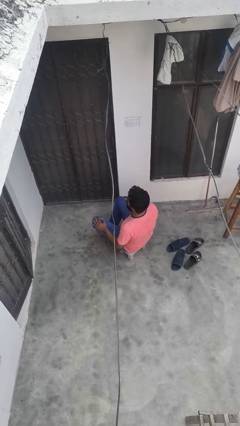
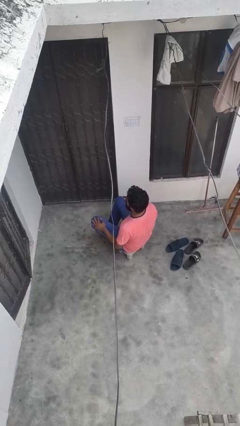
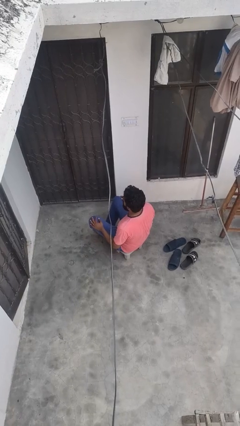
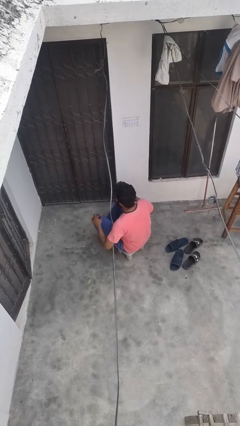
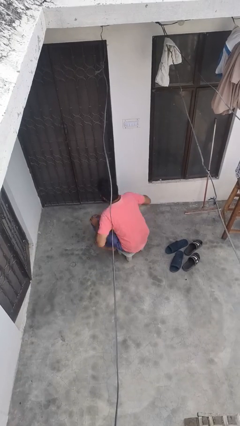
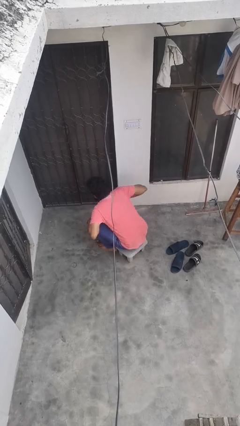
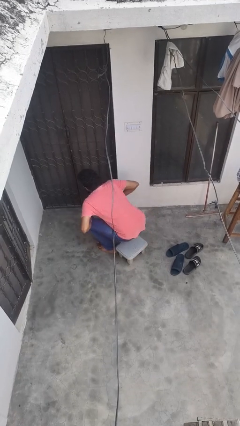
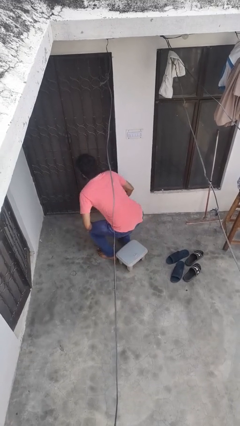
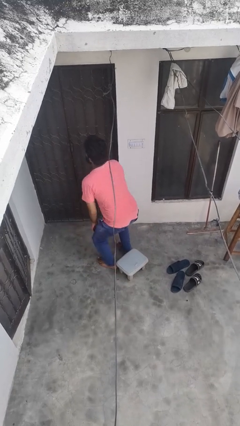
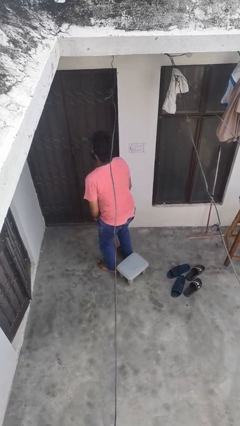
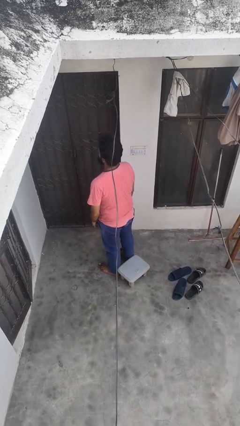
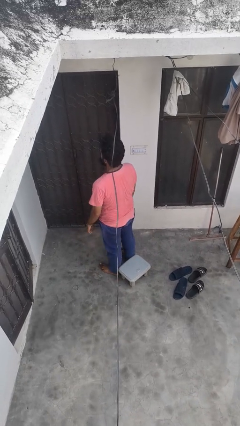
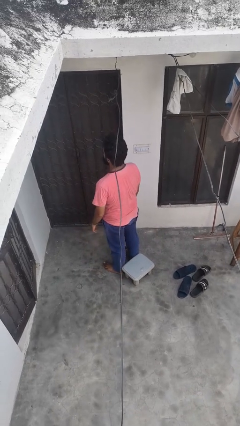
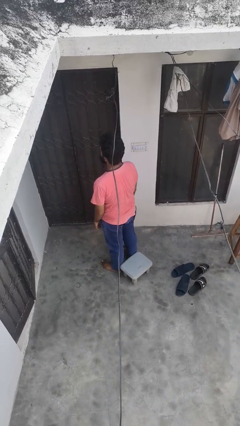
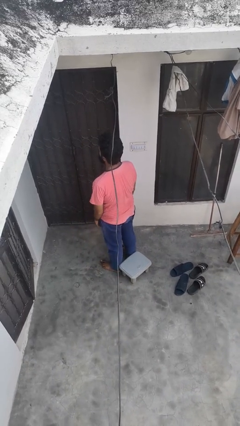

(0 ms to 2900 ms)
person stands up from floor

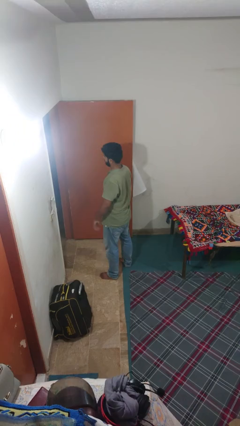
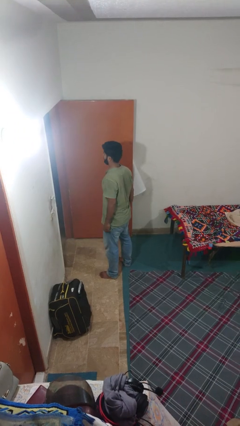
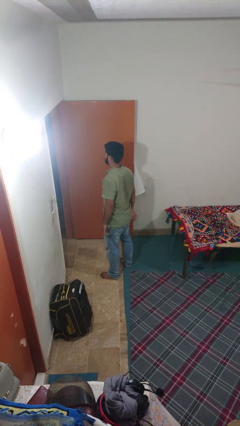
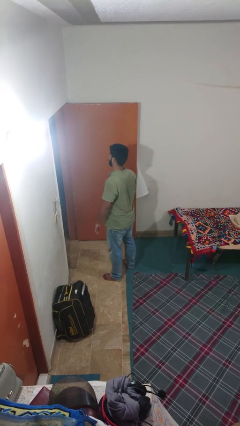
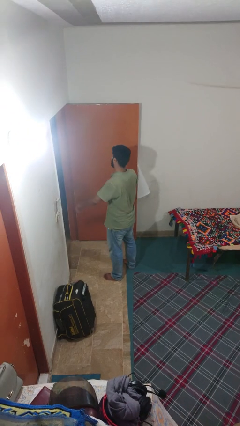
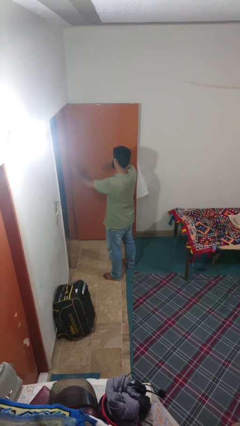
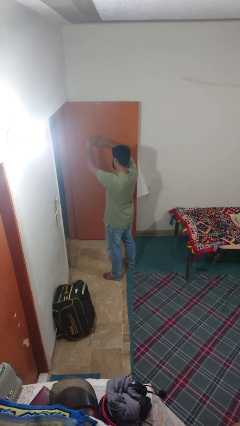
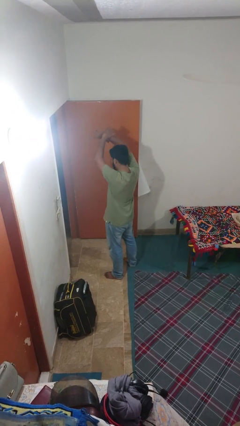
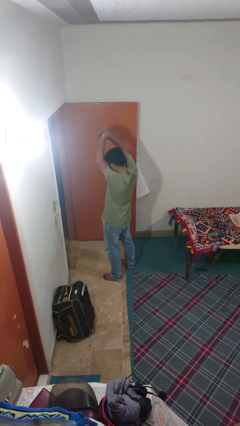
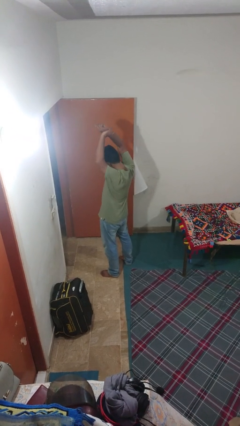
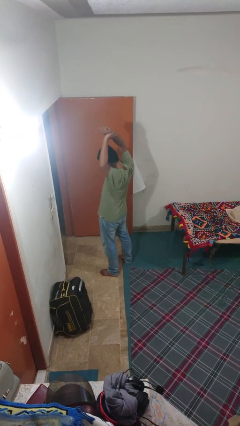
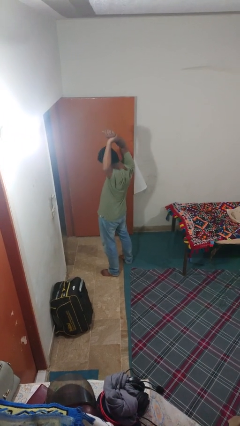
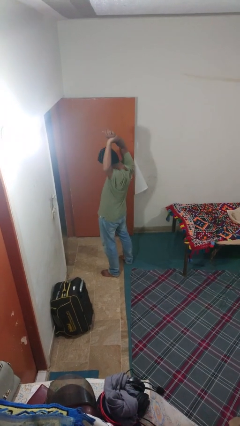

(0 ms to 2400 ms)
person stretches arms over head

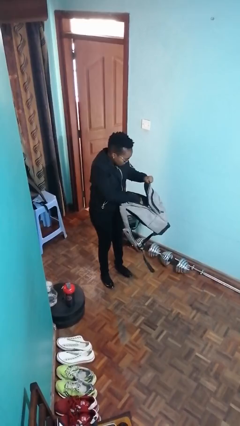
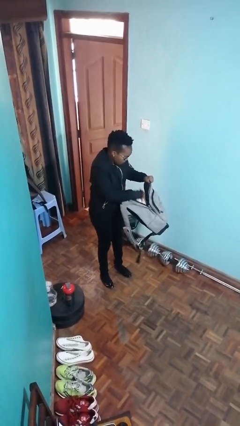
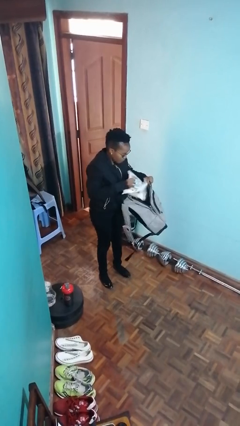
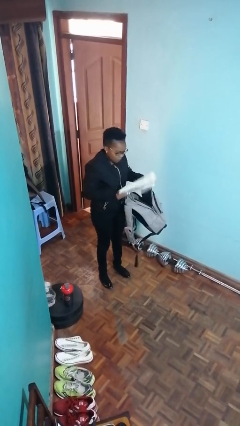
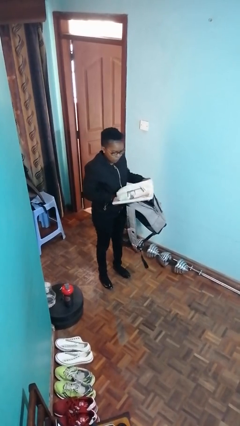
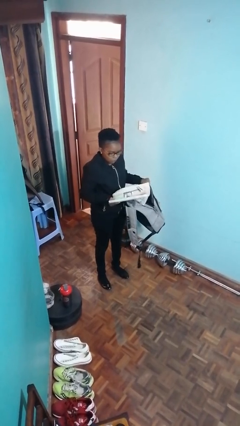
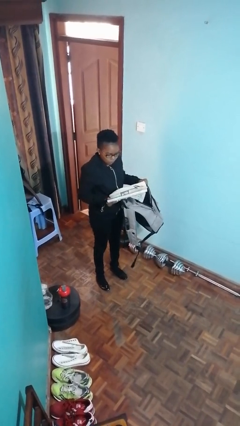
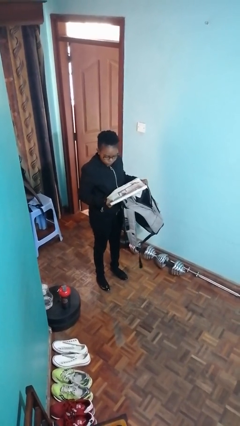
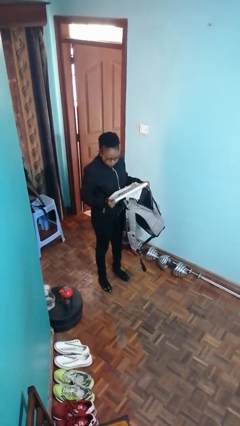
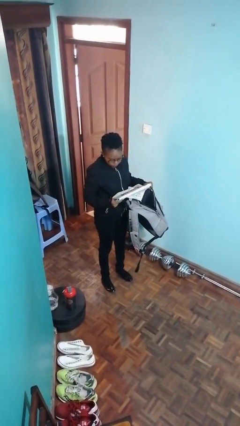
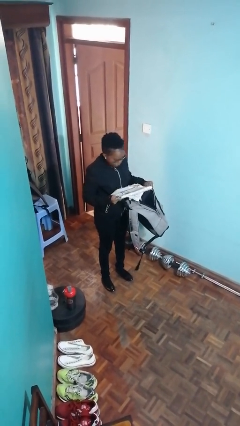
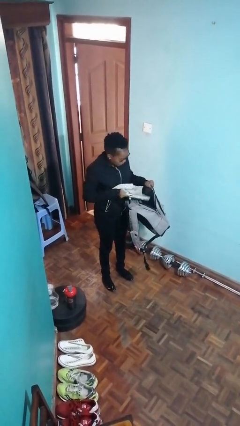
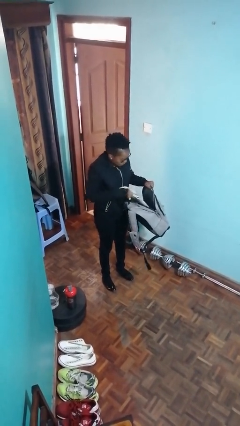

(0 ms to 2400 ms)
person takes object from backpack

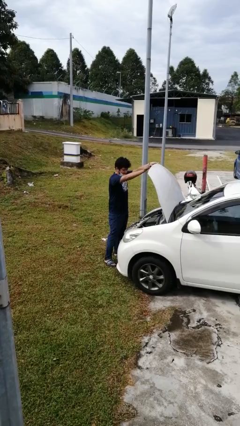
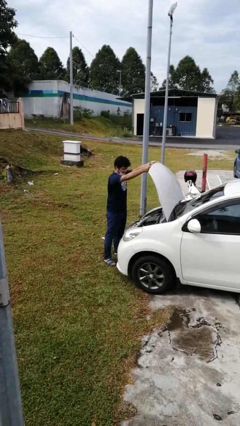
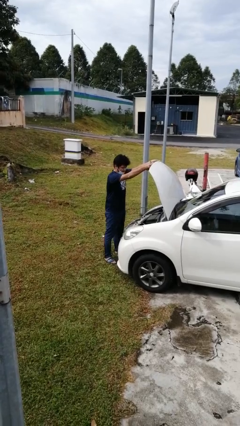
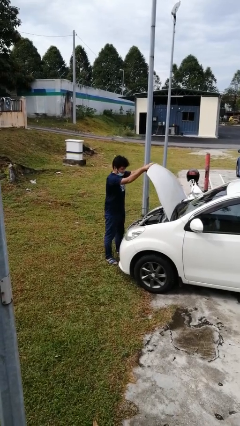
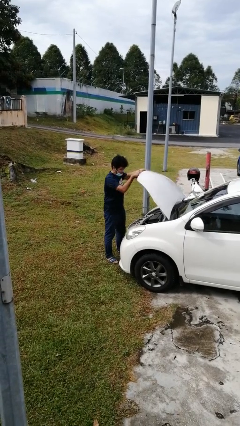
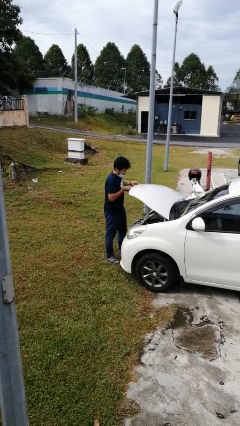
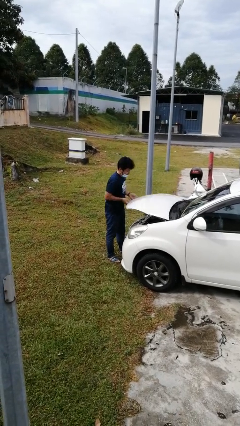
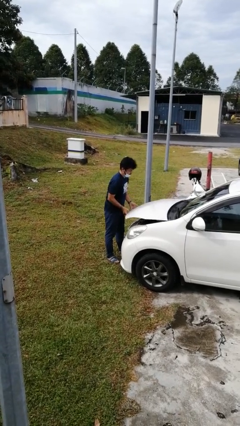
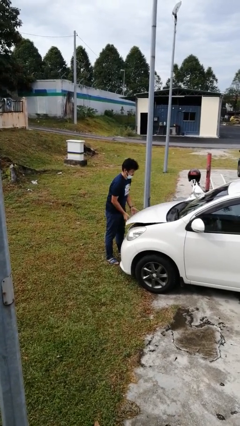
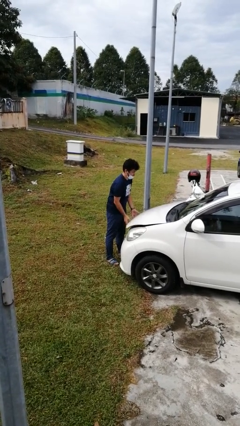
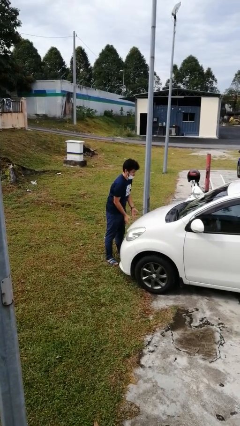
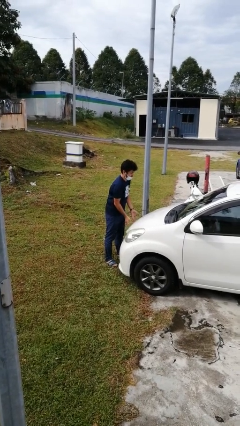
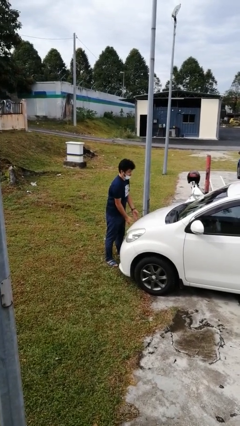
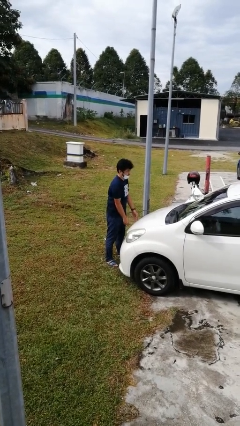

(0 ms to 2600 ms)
person closes car hood

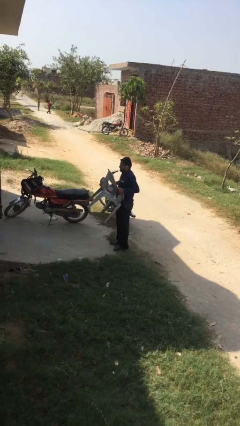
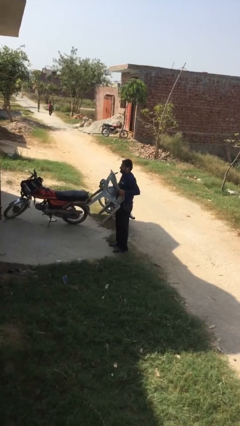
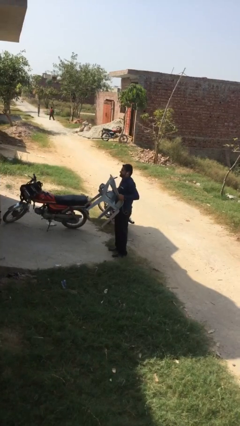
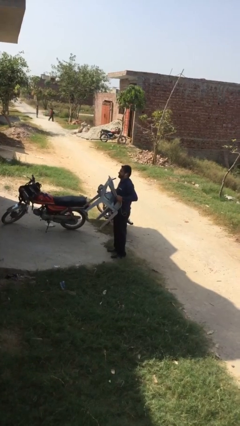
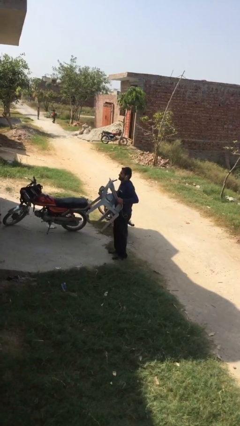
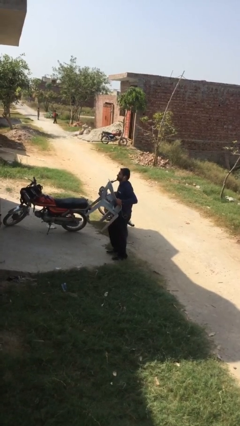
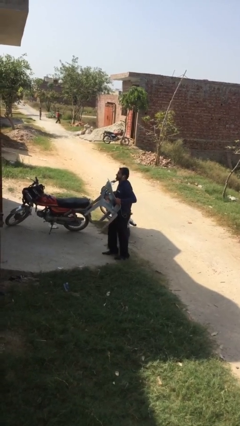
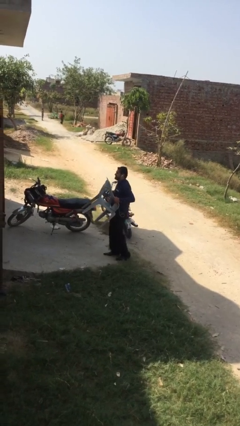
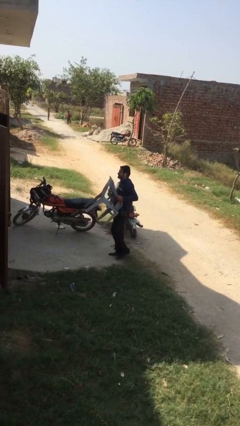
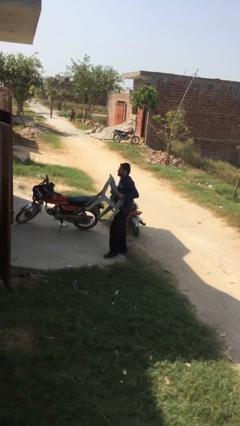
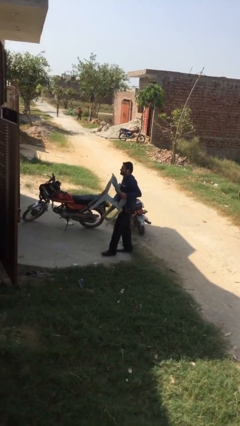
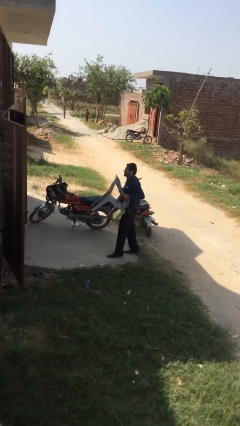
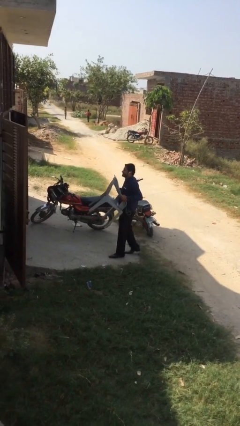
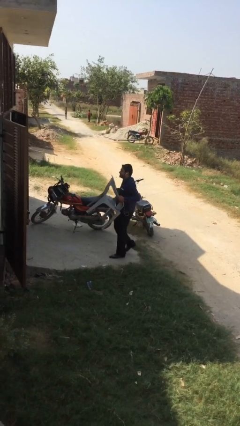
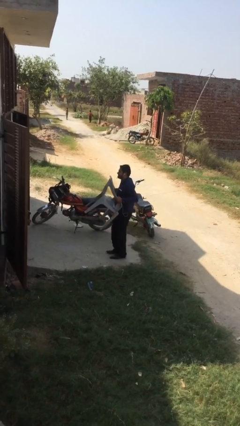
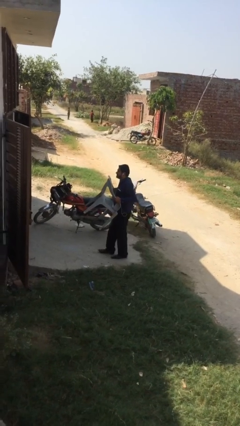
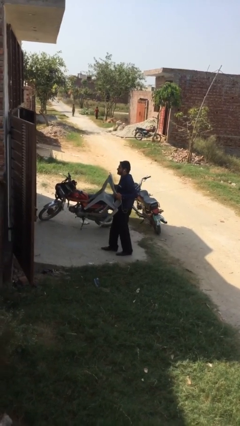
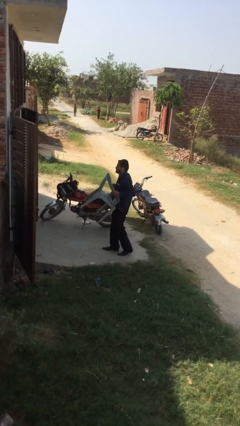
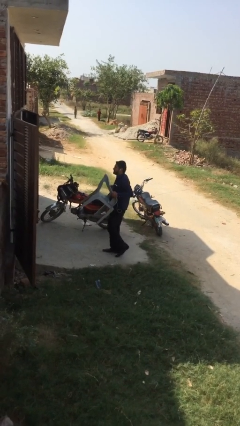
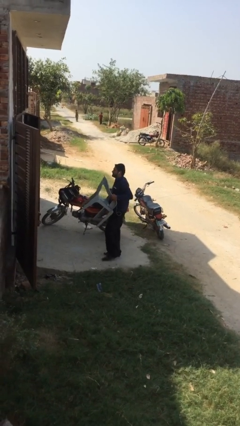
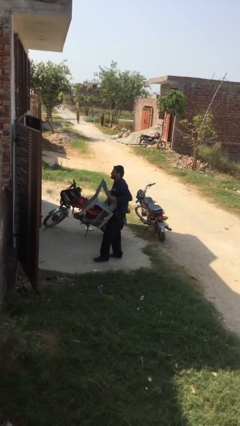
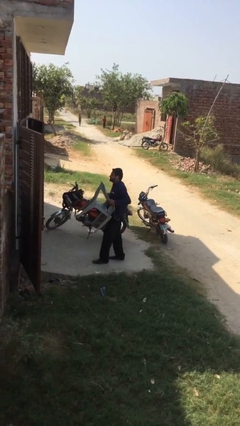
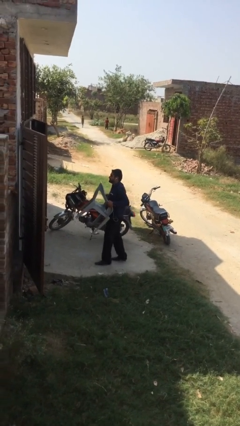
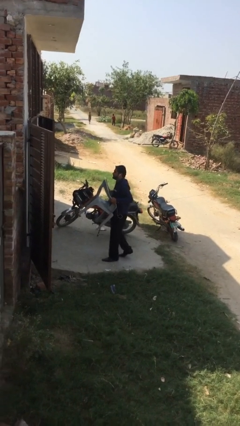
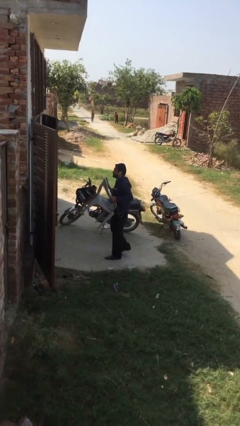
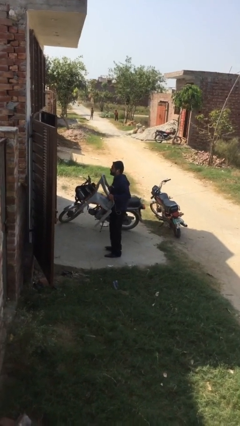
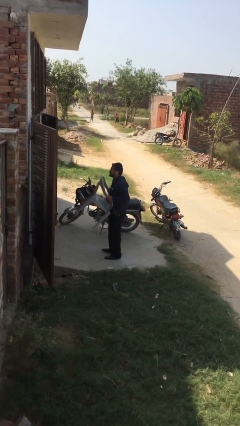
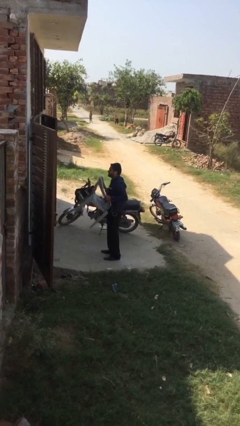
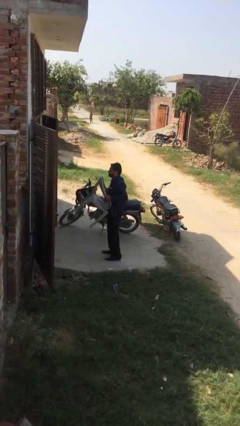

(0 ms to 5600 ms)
person carries heavy object

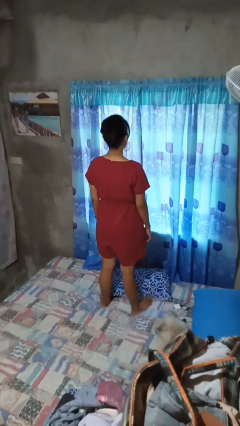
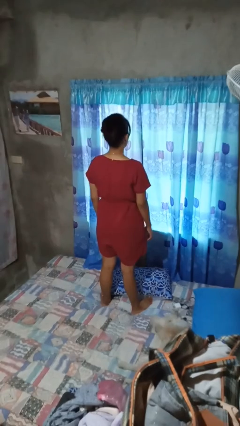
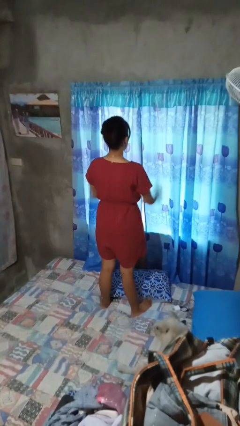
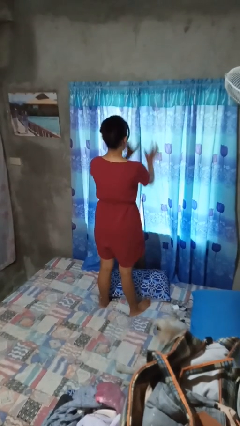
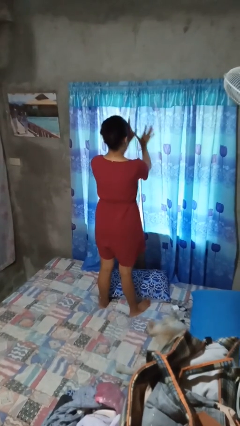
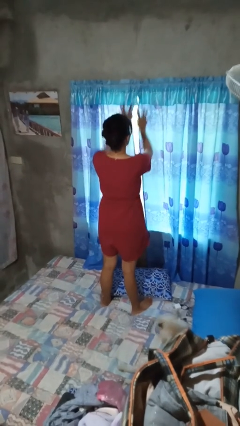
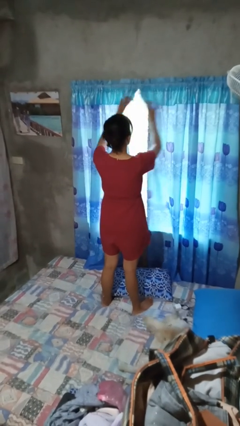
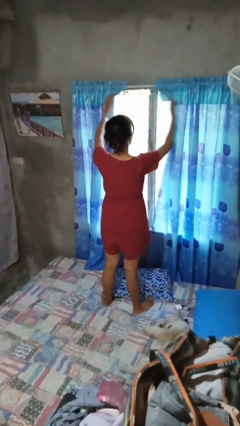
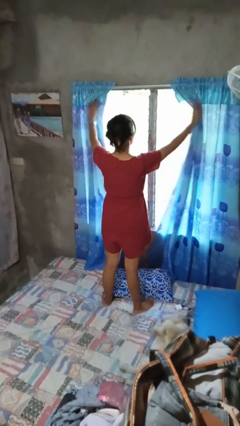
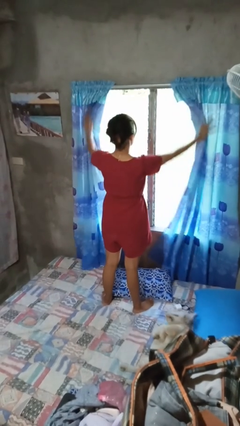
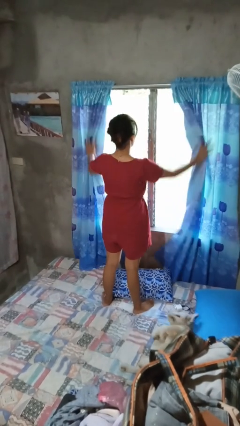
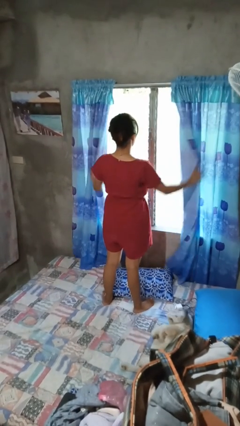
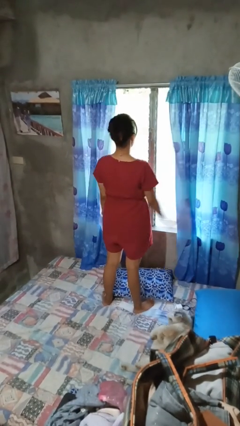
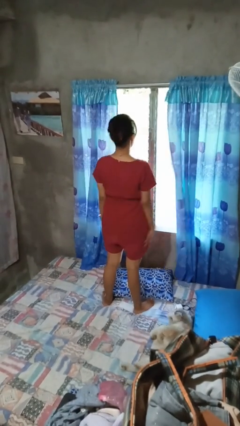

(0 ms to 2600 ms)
person opens curtains
